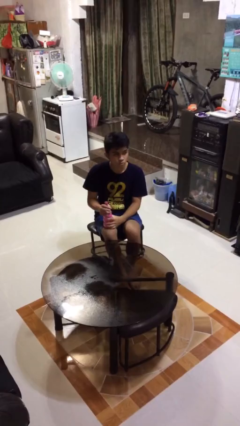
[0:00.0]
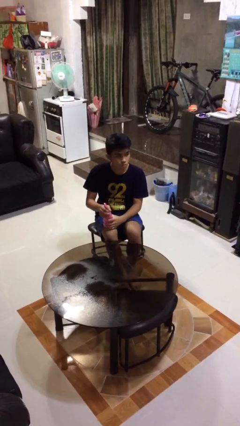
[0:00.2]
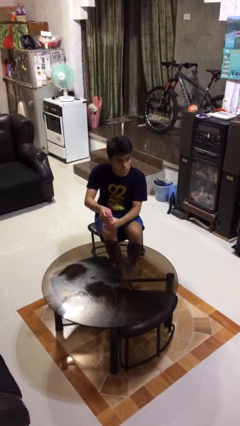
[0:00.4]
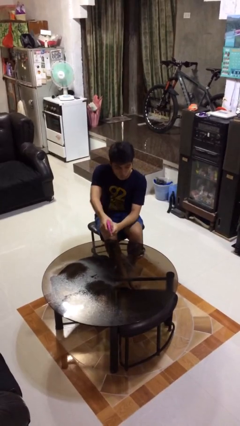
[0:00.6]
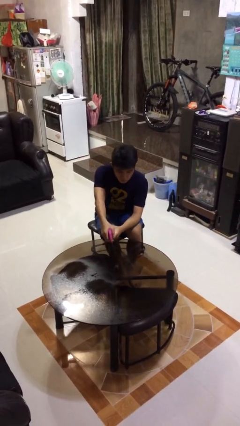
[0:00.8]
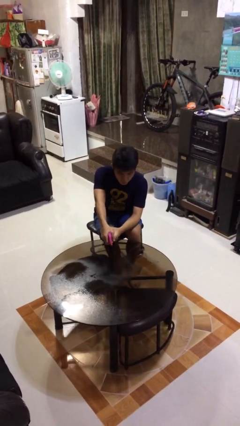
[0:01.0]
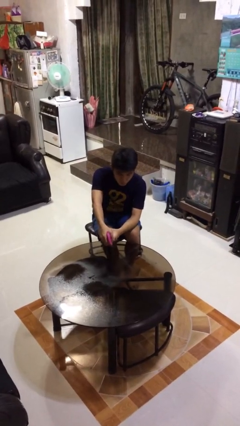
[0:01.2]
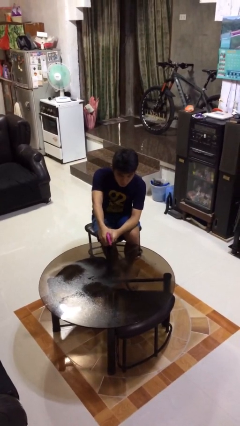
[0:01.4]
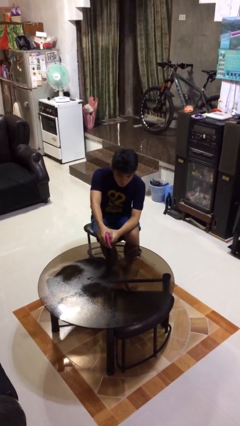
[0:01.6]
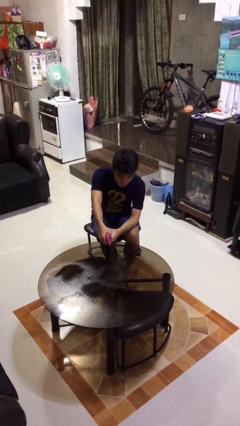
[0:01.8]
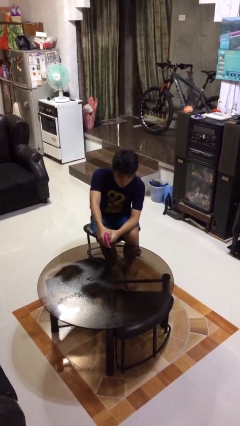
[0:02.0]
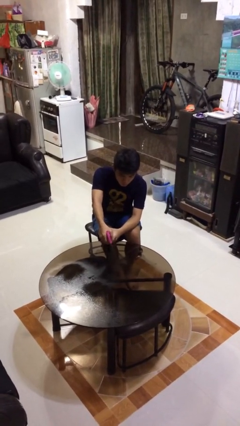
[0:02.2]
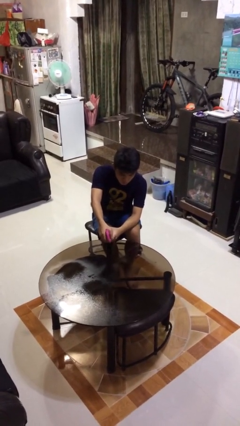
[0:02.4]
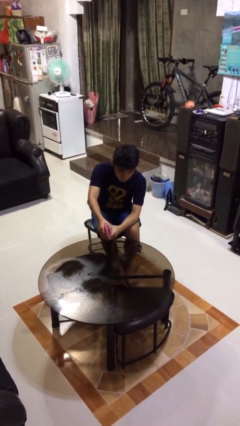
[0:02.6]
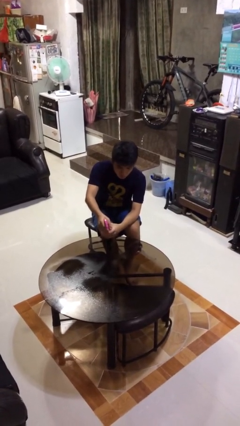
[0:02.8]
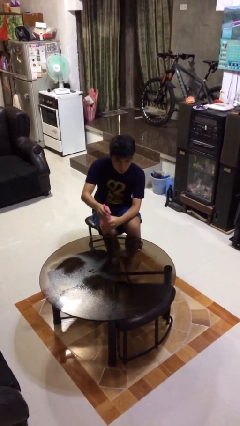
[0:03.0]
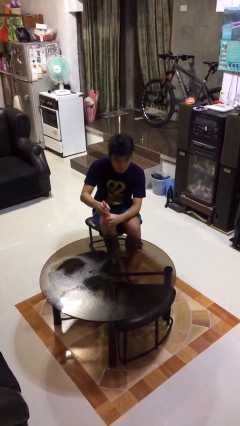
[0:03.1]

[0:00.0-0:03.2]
person sprays from bottle

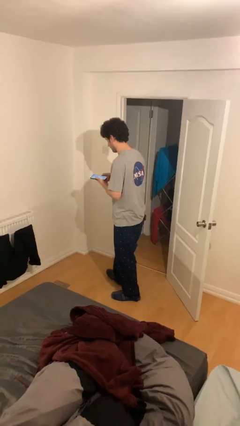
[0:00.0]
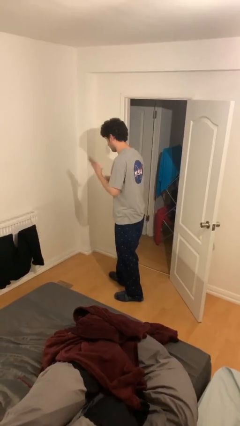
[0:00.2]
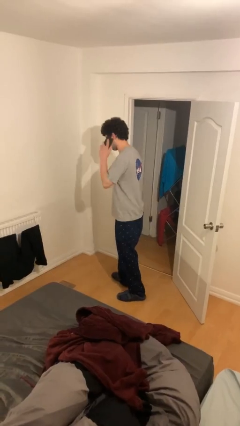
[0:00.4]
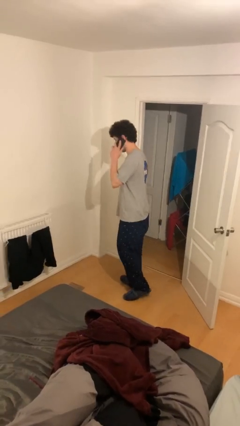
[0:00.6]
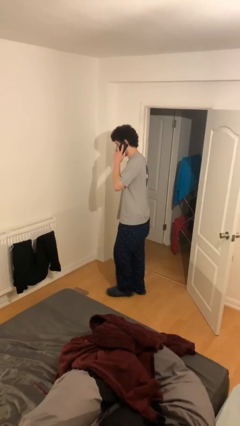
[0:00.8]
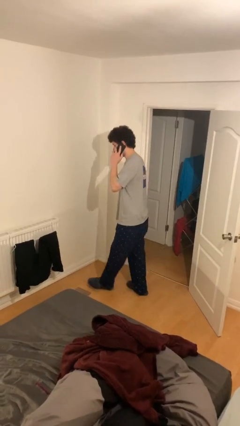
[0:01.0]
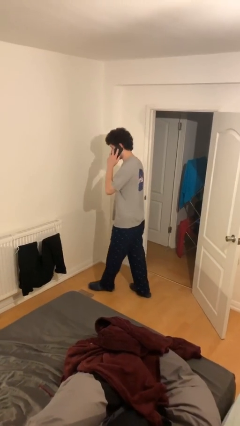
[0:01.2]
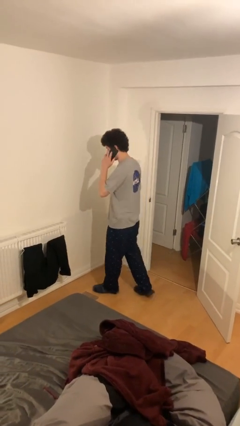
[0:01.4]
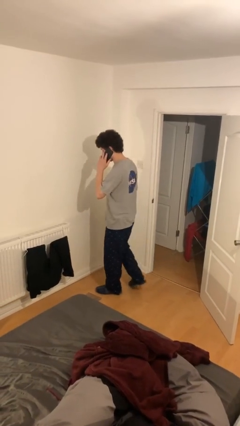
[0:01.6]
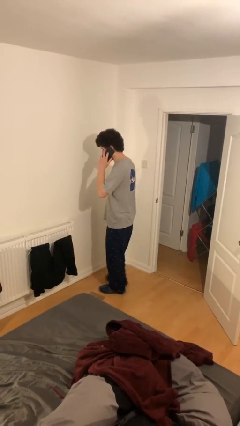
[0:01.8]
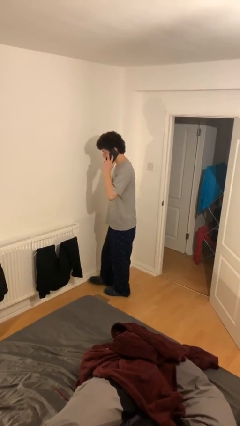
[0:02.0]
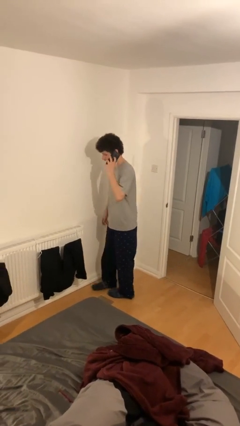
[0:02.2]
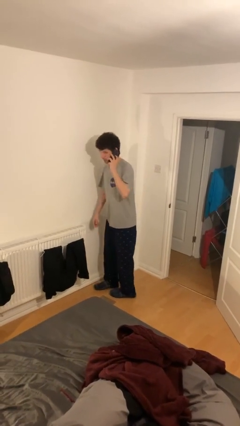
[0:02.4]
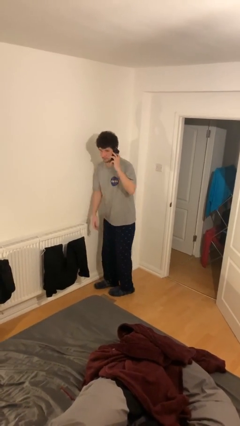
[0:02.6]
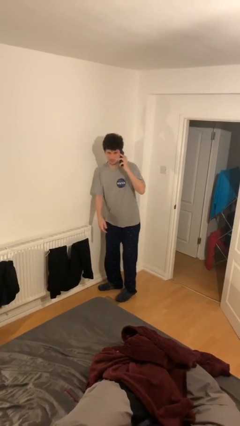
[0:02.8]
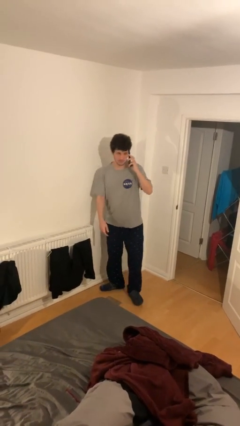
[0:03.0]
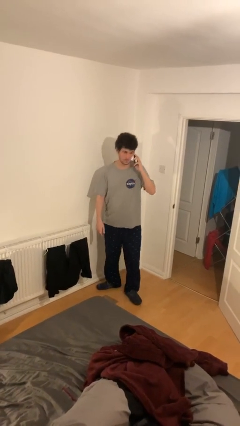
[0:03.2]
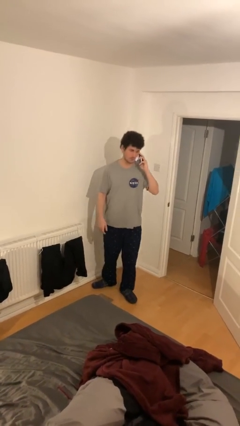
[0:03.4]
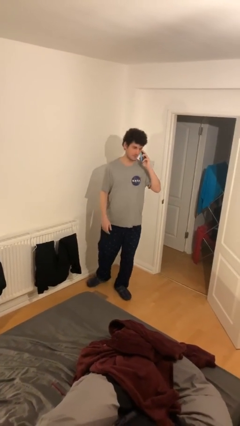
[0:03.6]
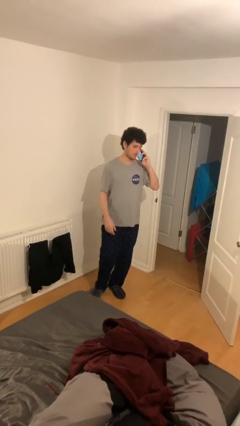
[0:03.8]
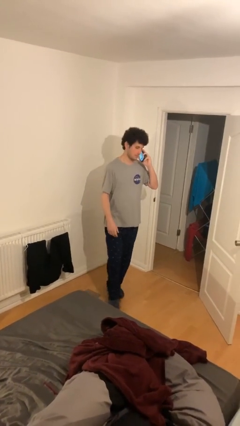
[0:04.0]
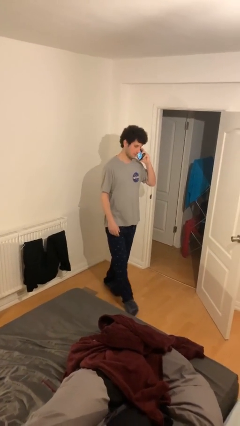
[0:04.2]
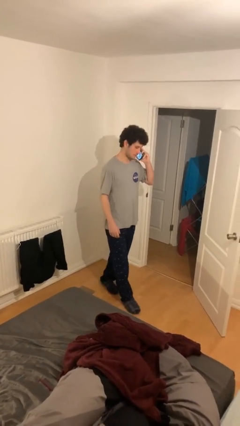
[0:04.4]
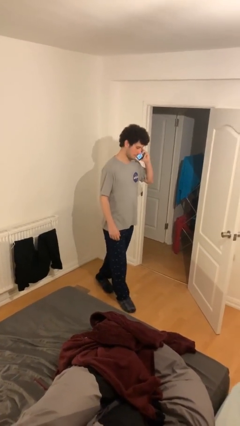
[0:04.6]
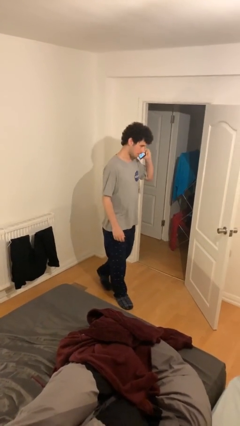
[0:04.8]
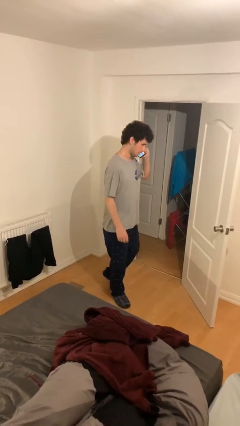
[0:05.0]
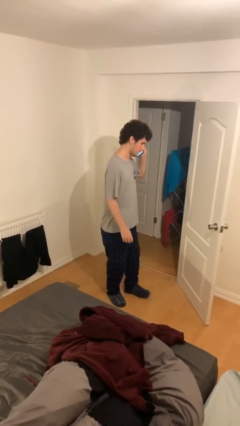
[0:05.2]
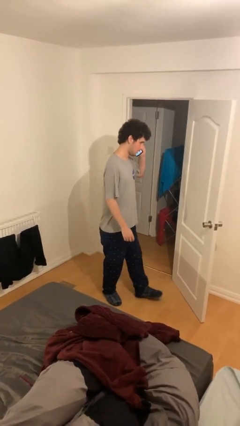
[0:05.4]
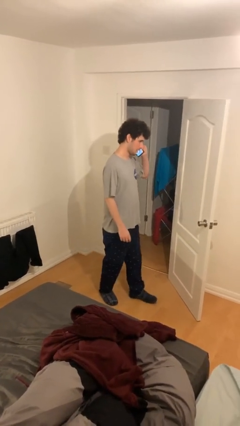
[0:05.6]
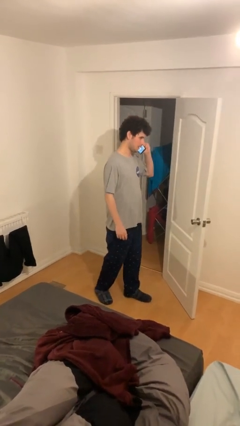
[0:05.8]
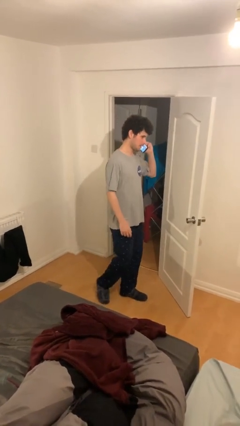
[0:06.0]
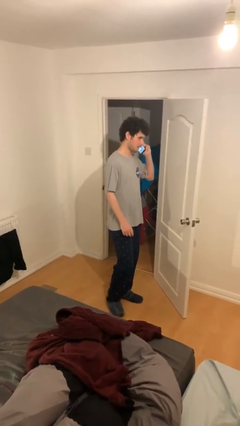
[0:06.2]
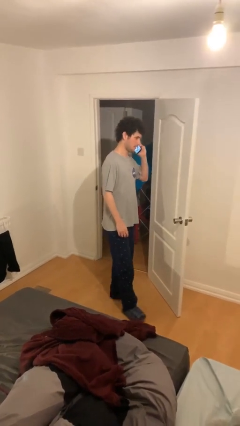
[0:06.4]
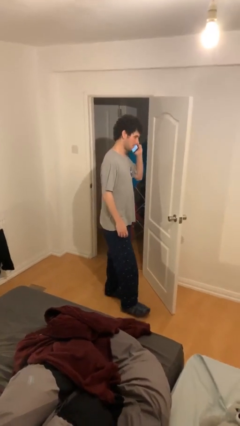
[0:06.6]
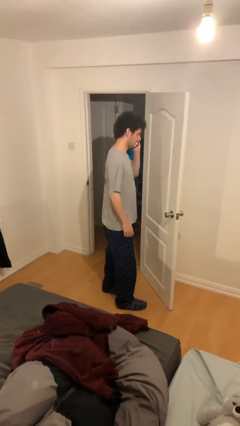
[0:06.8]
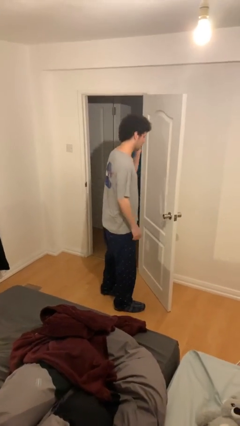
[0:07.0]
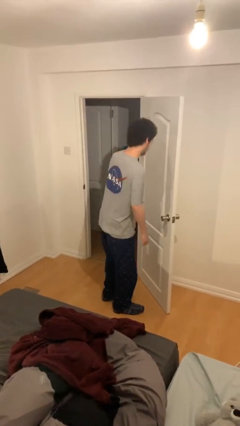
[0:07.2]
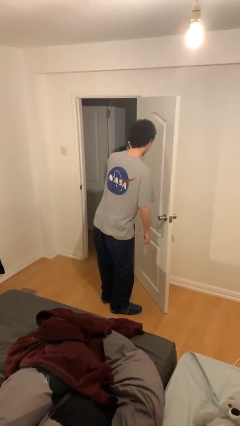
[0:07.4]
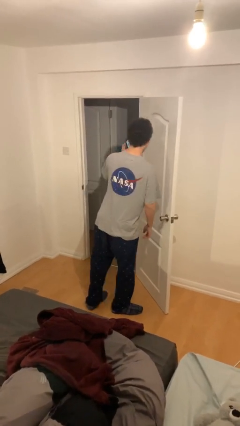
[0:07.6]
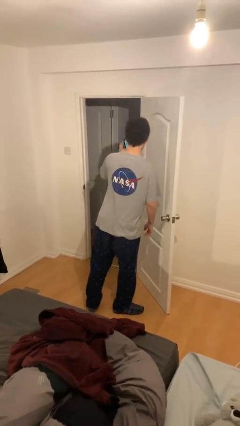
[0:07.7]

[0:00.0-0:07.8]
person talks on phone

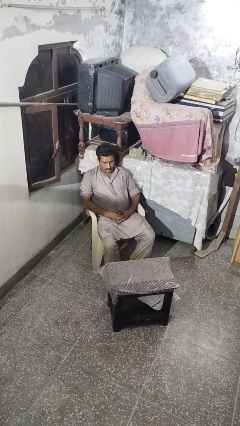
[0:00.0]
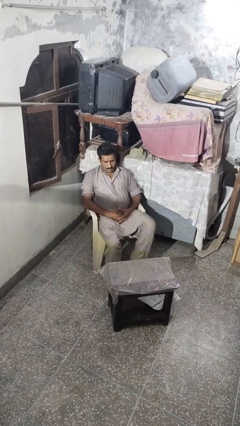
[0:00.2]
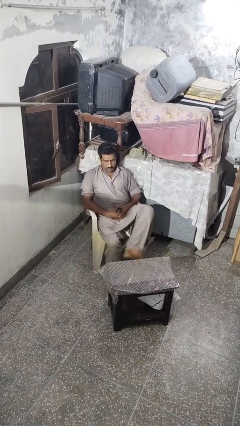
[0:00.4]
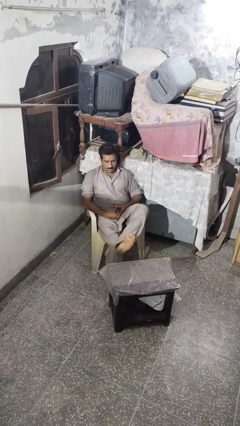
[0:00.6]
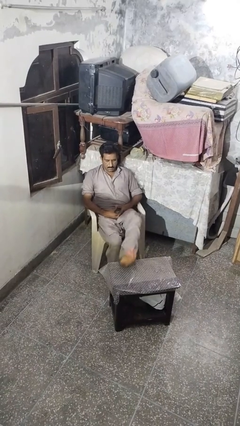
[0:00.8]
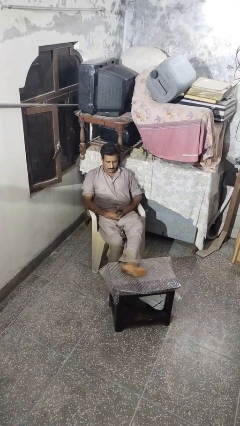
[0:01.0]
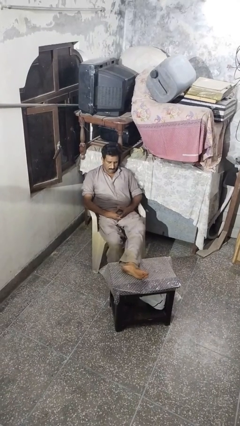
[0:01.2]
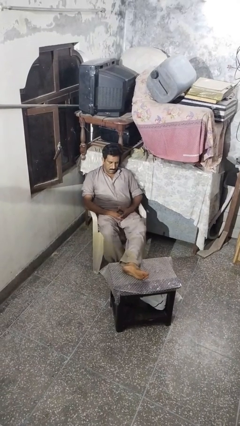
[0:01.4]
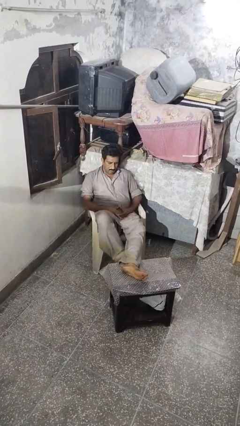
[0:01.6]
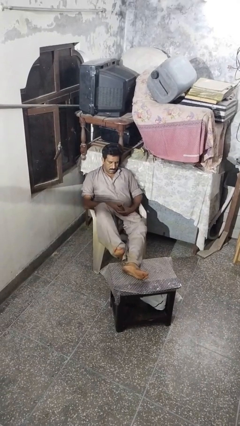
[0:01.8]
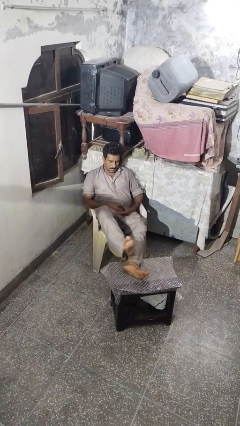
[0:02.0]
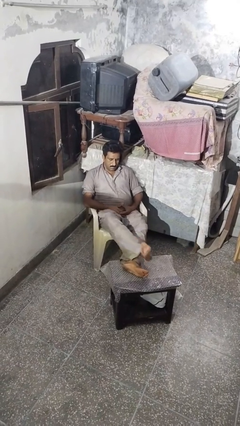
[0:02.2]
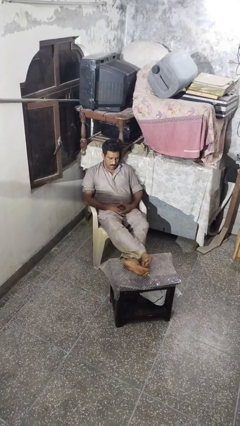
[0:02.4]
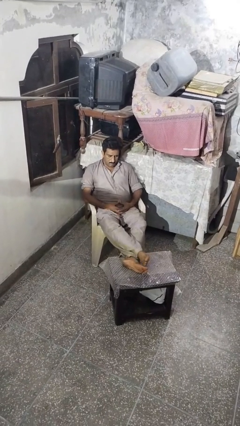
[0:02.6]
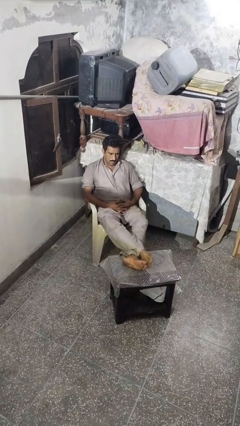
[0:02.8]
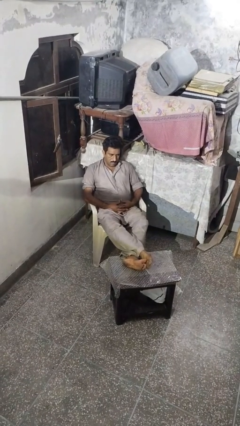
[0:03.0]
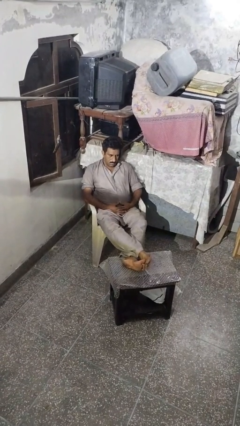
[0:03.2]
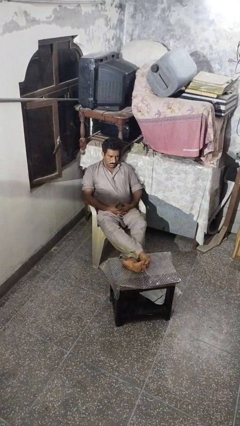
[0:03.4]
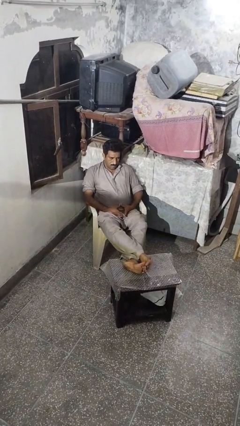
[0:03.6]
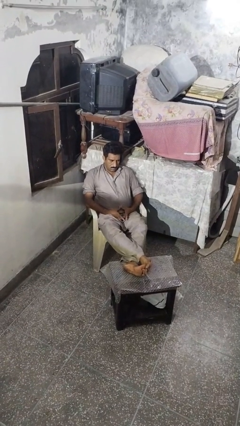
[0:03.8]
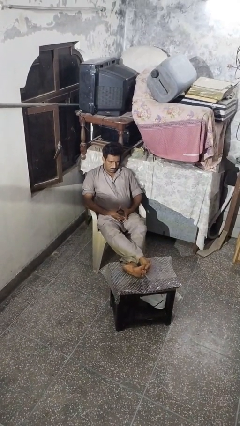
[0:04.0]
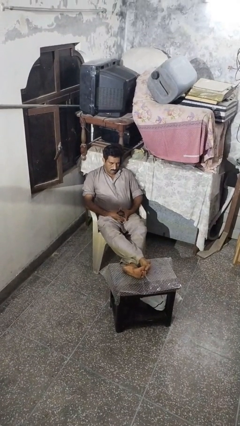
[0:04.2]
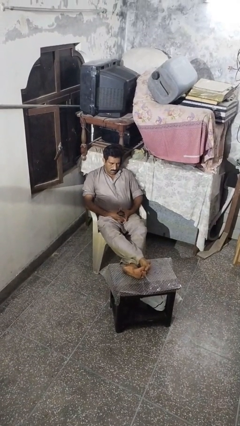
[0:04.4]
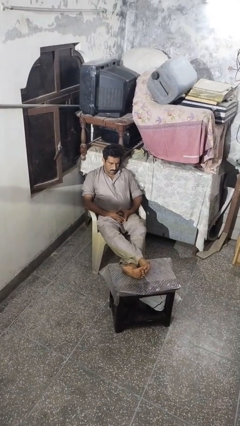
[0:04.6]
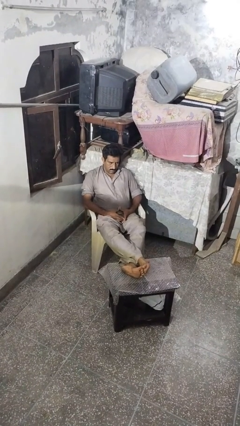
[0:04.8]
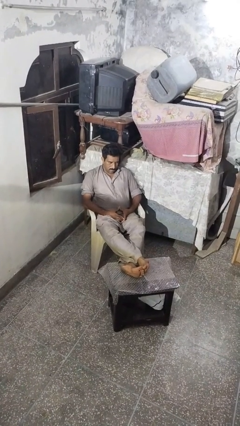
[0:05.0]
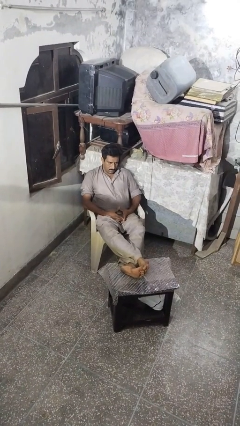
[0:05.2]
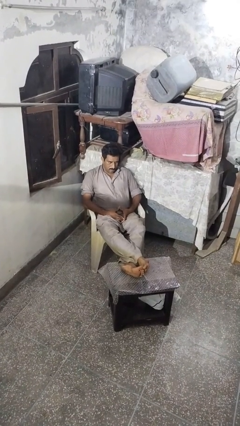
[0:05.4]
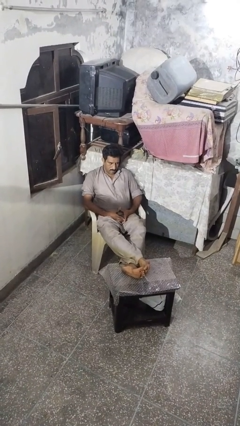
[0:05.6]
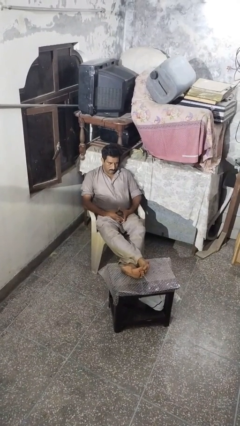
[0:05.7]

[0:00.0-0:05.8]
person puts feet up

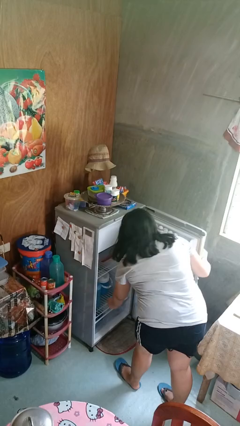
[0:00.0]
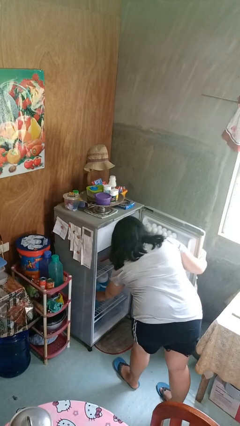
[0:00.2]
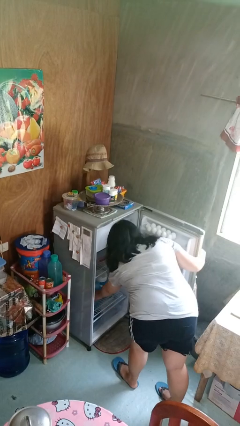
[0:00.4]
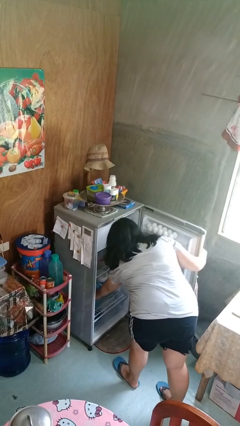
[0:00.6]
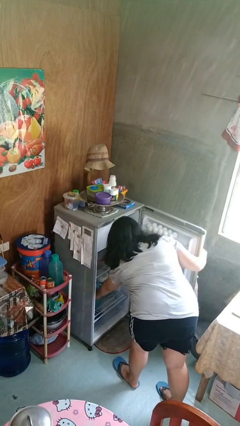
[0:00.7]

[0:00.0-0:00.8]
person takes object from refrigerator

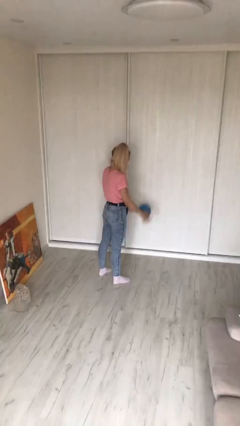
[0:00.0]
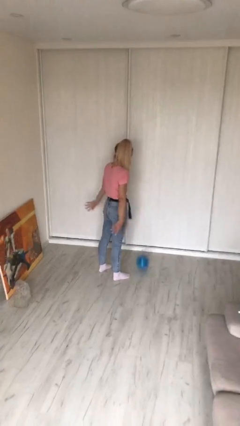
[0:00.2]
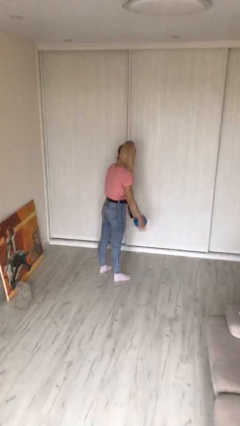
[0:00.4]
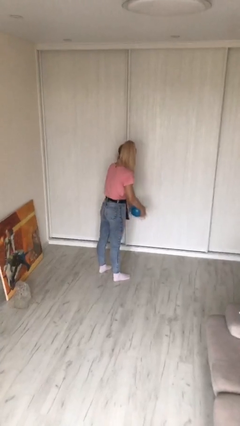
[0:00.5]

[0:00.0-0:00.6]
person bounces ball on floor
